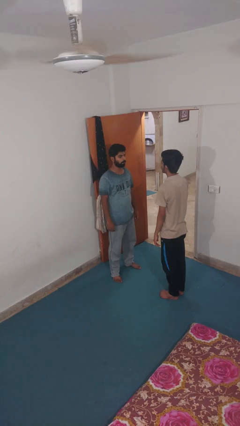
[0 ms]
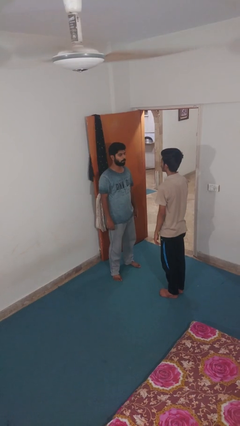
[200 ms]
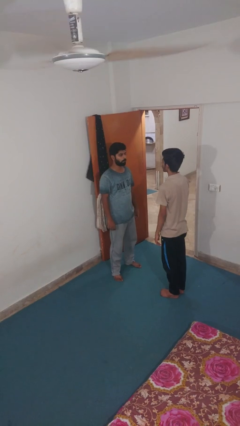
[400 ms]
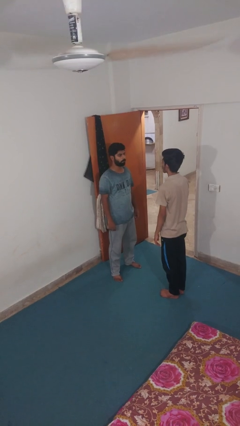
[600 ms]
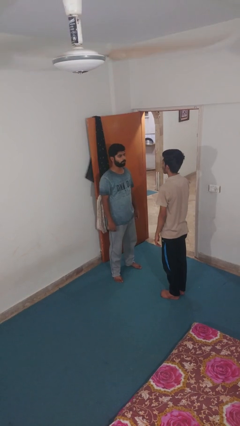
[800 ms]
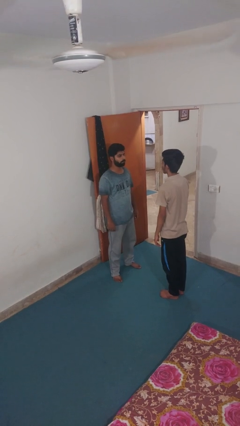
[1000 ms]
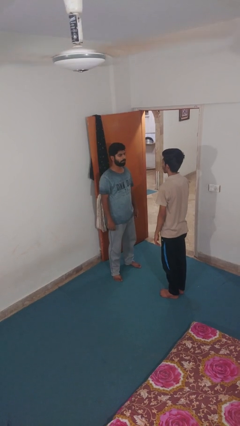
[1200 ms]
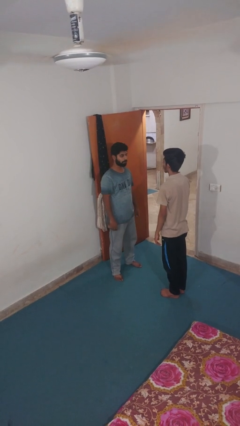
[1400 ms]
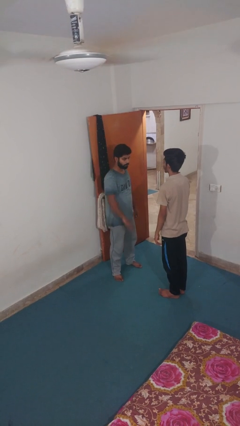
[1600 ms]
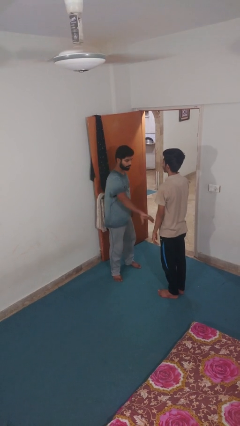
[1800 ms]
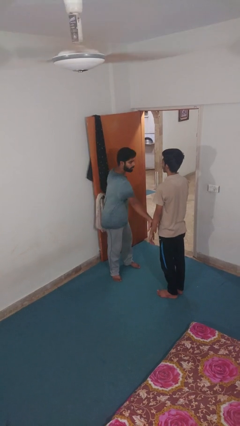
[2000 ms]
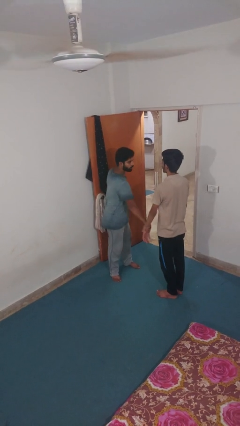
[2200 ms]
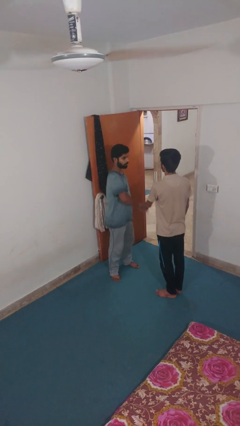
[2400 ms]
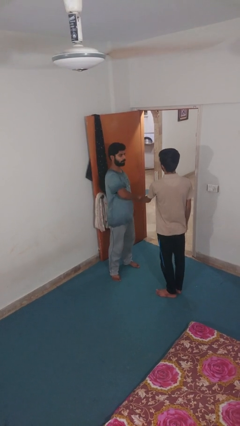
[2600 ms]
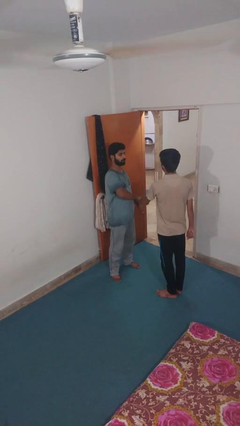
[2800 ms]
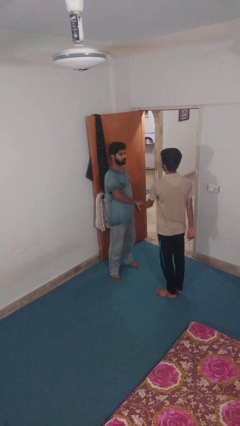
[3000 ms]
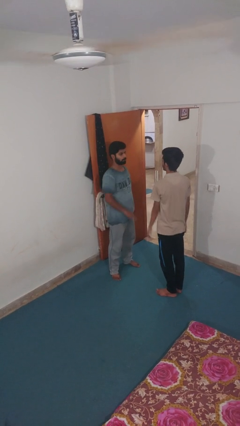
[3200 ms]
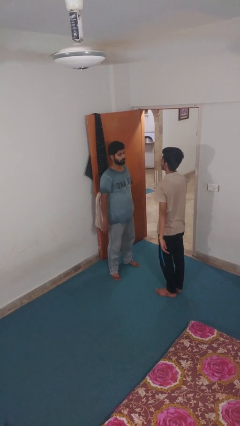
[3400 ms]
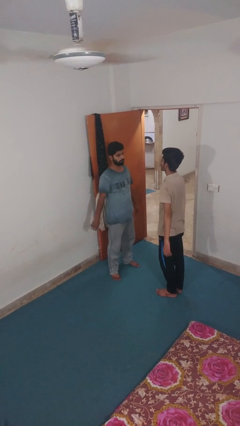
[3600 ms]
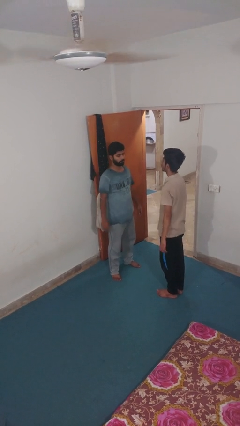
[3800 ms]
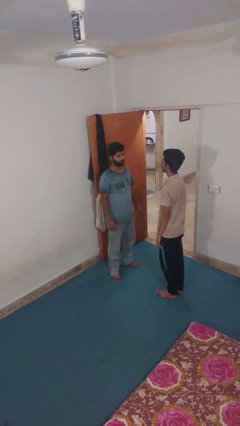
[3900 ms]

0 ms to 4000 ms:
person grabs person by forearm

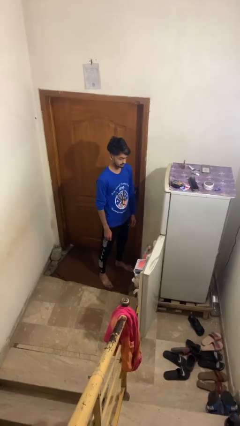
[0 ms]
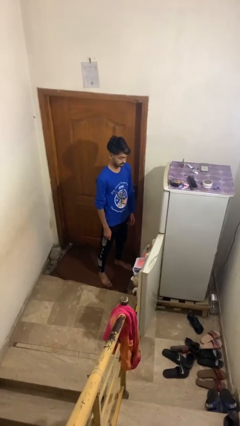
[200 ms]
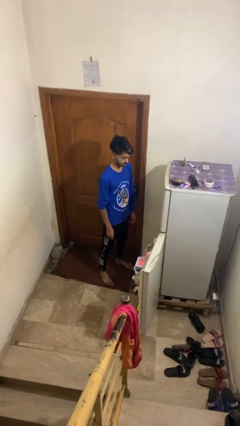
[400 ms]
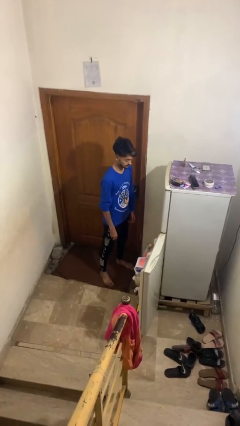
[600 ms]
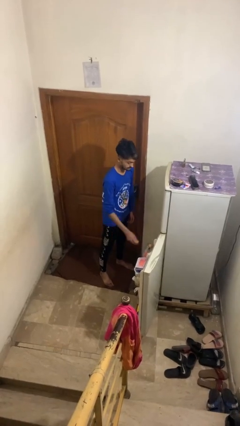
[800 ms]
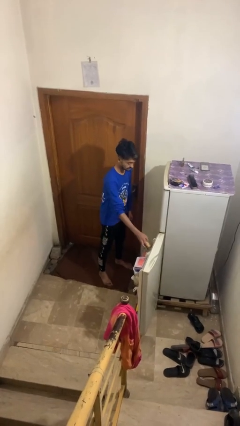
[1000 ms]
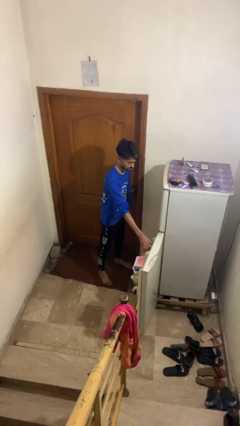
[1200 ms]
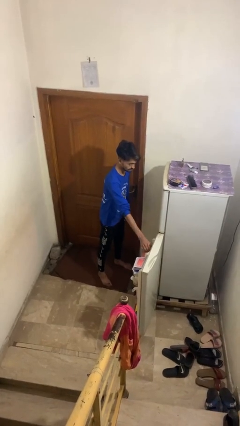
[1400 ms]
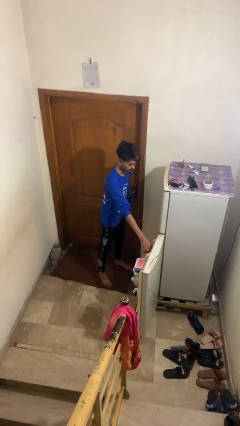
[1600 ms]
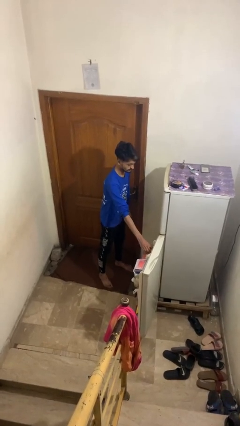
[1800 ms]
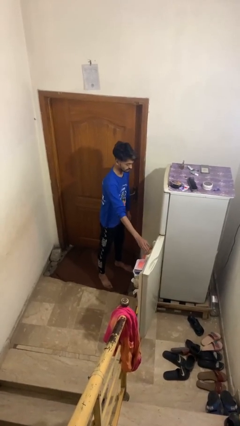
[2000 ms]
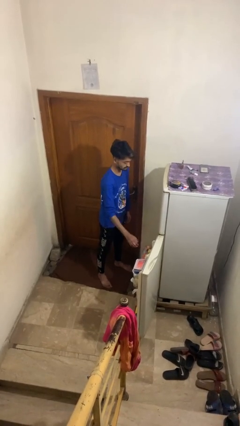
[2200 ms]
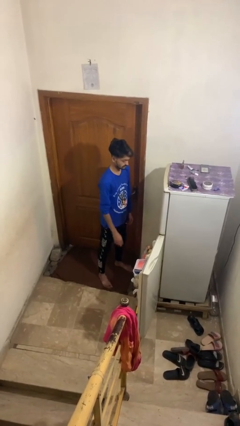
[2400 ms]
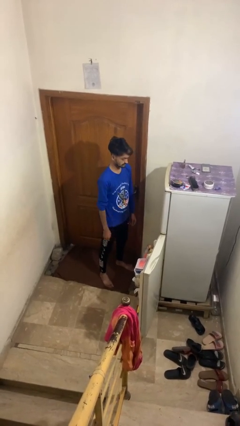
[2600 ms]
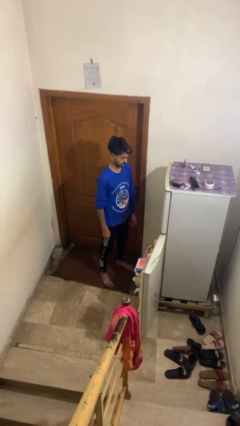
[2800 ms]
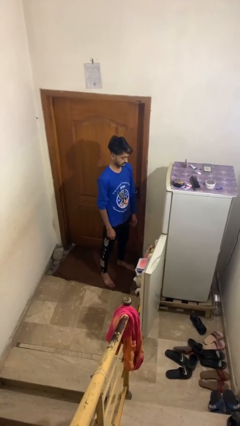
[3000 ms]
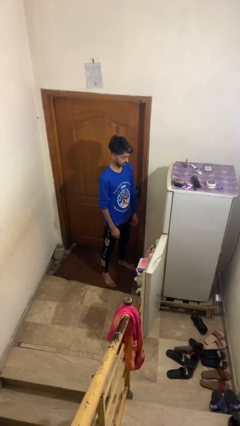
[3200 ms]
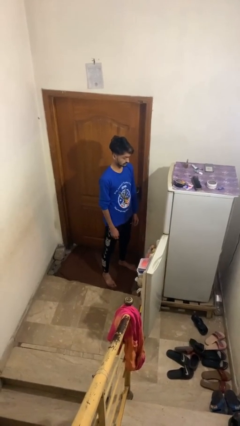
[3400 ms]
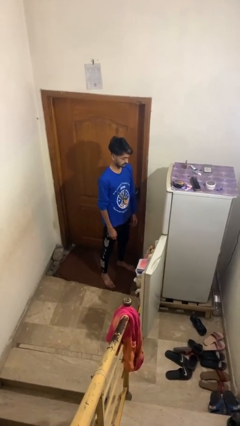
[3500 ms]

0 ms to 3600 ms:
person puts object into refrigerator

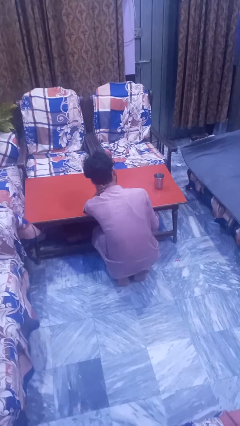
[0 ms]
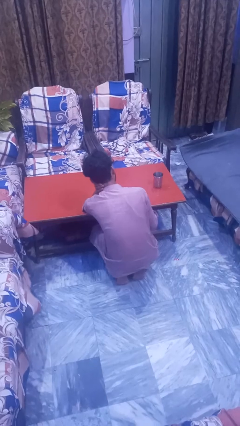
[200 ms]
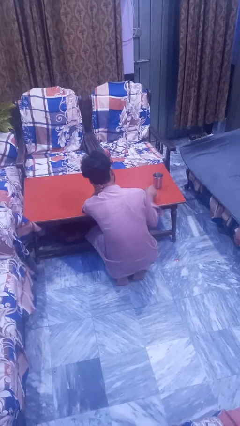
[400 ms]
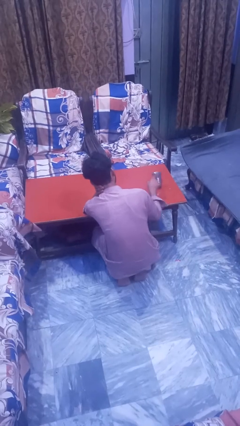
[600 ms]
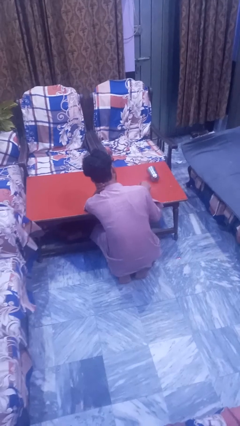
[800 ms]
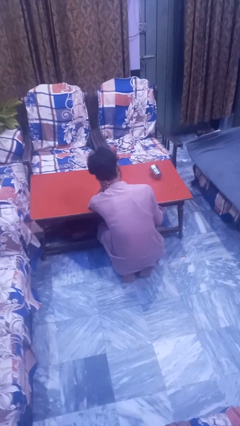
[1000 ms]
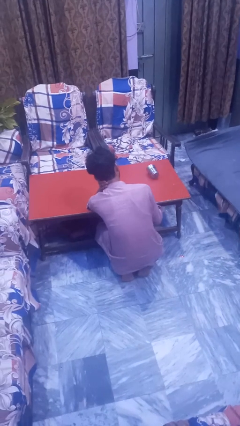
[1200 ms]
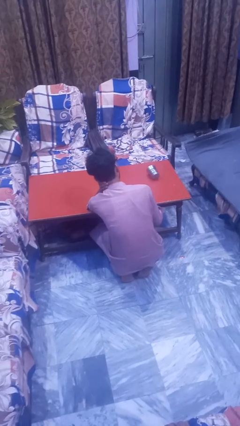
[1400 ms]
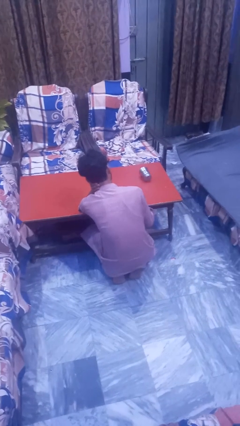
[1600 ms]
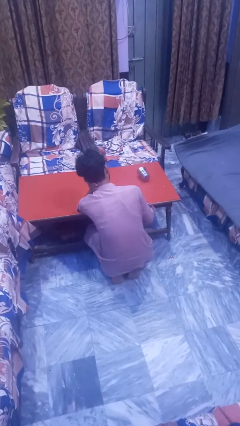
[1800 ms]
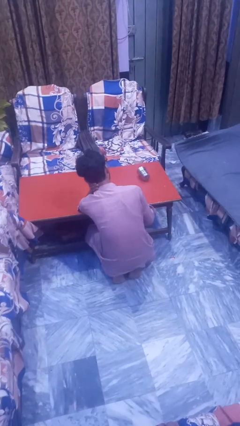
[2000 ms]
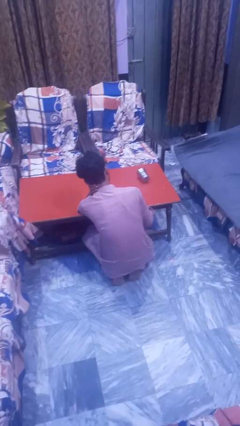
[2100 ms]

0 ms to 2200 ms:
person knocks over glass

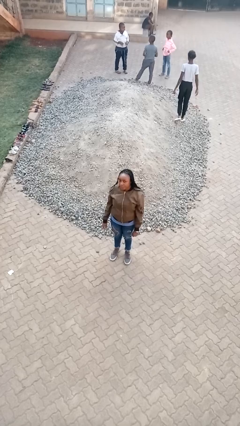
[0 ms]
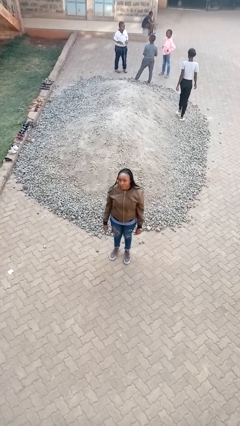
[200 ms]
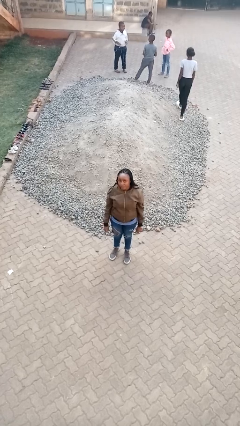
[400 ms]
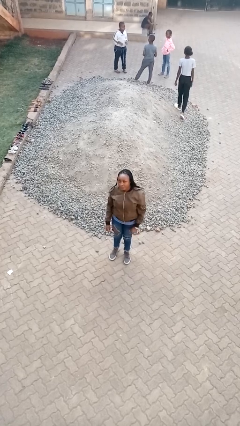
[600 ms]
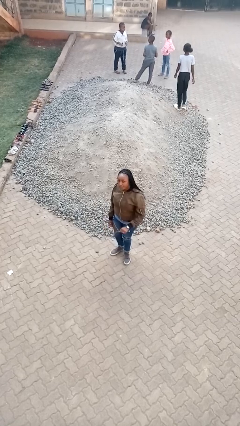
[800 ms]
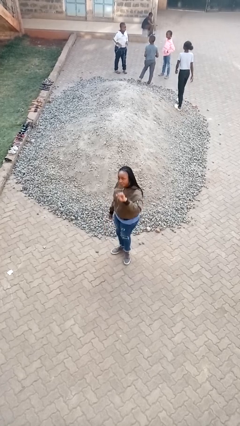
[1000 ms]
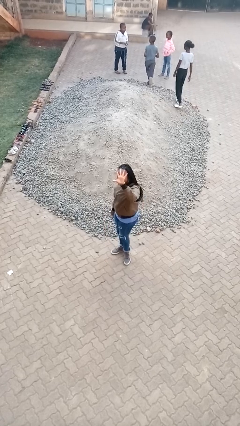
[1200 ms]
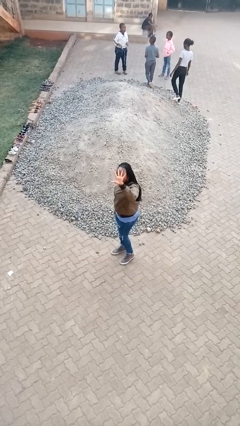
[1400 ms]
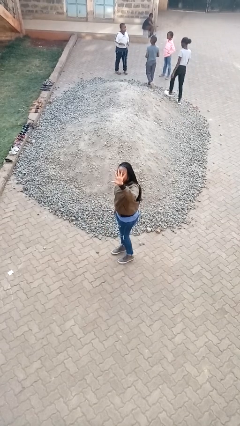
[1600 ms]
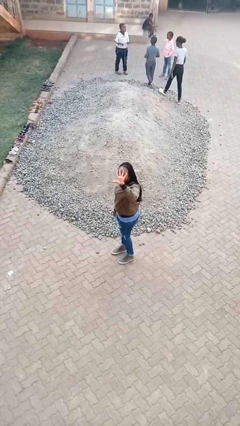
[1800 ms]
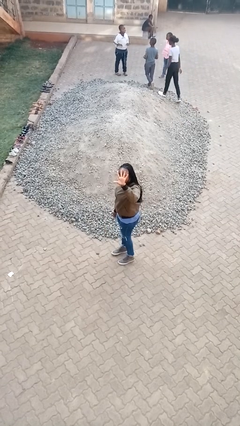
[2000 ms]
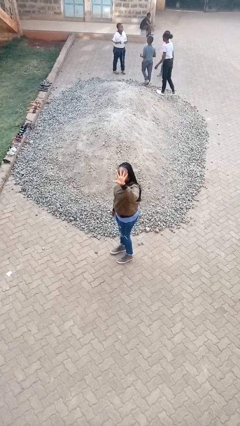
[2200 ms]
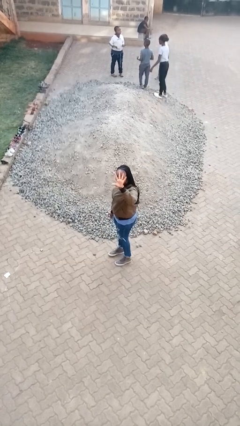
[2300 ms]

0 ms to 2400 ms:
person gestures number five

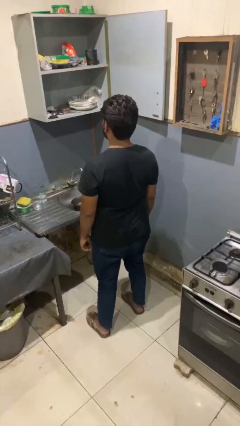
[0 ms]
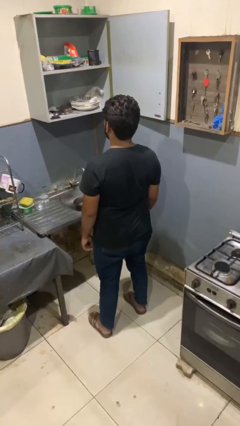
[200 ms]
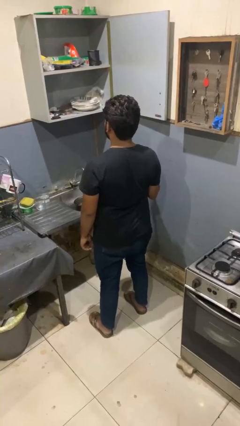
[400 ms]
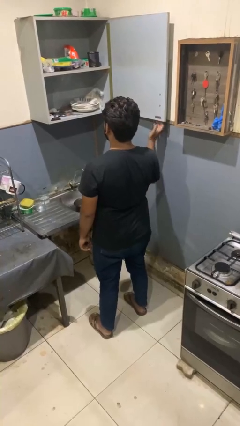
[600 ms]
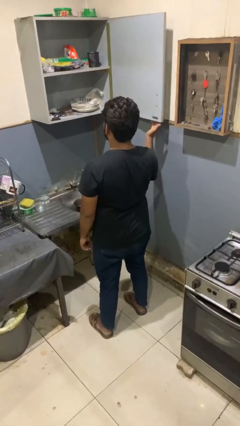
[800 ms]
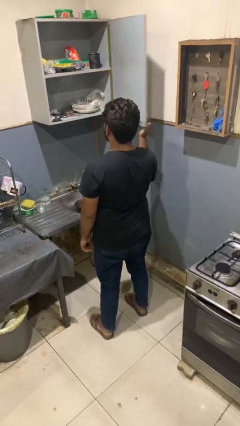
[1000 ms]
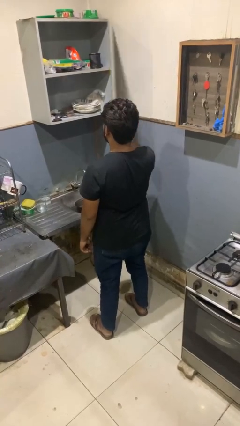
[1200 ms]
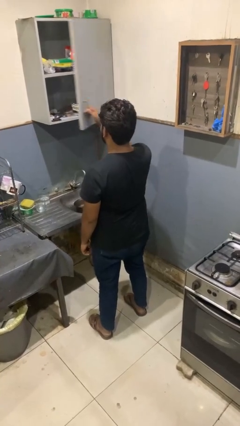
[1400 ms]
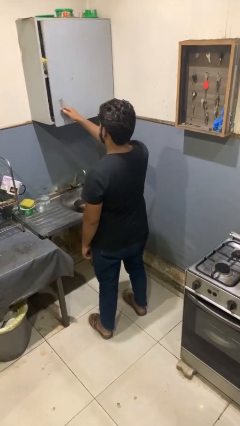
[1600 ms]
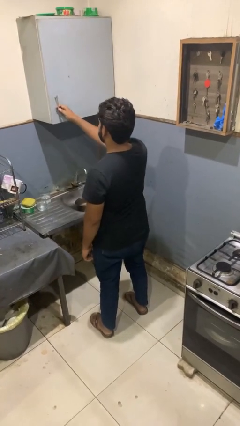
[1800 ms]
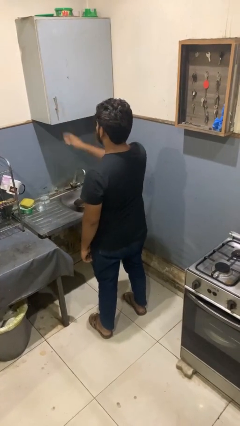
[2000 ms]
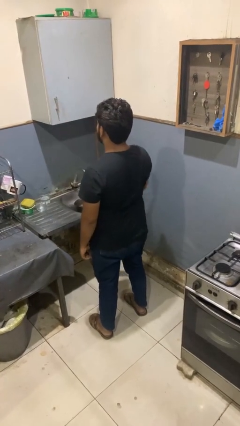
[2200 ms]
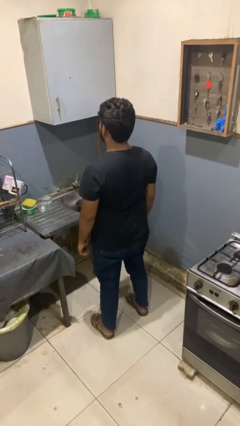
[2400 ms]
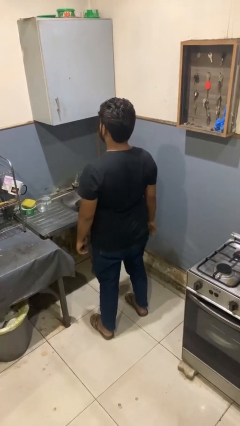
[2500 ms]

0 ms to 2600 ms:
person closes kitchen drawer

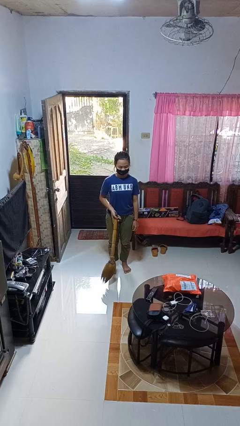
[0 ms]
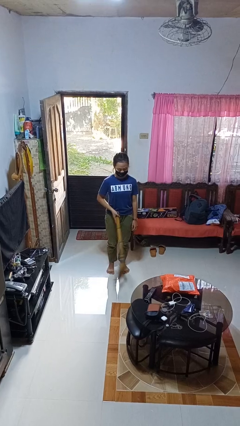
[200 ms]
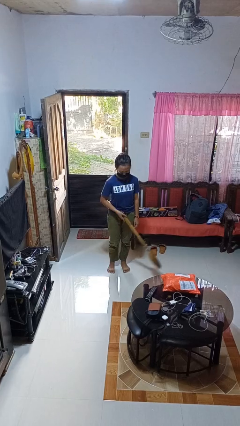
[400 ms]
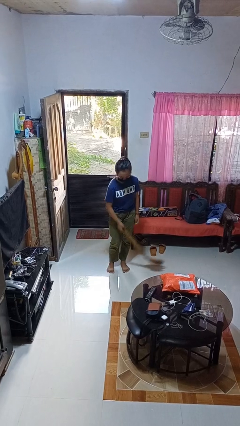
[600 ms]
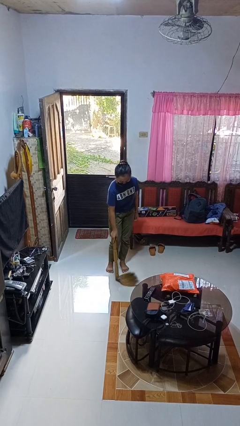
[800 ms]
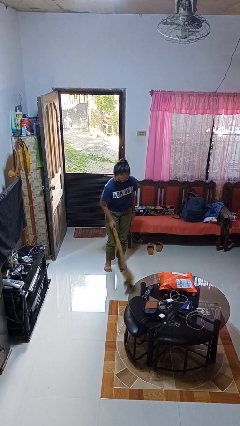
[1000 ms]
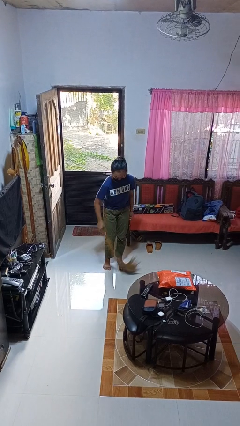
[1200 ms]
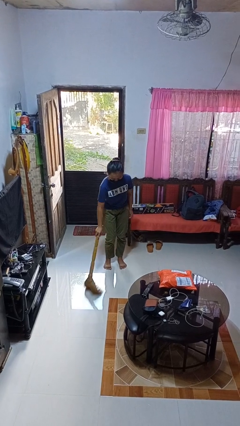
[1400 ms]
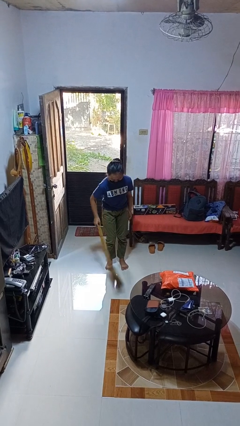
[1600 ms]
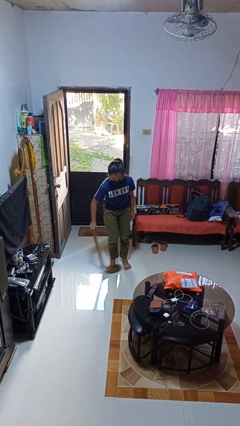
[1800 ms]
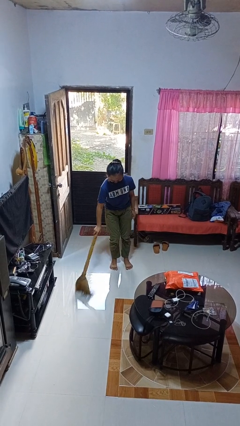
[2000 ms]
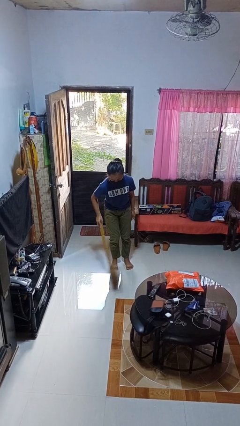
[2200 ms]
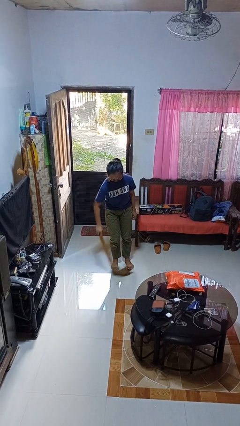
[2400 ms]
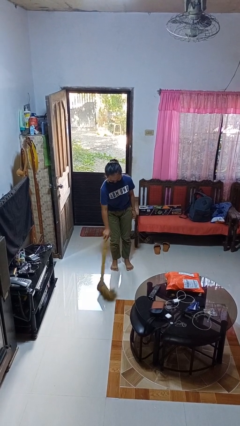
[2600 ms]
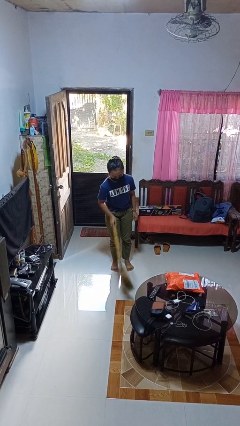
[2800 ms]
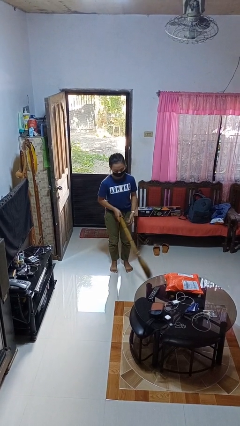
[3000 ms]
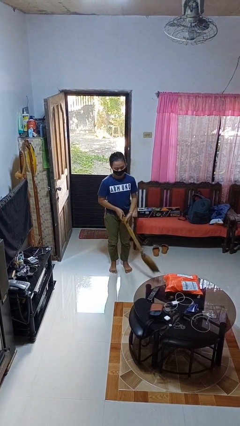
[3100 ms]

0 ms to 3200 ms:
person sweeps floor
